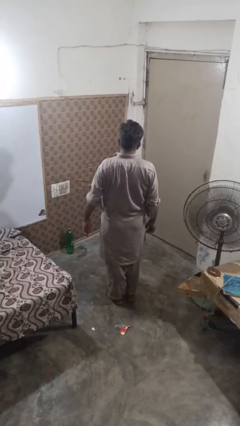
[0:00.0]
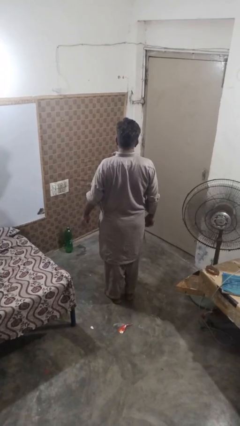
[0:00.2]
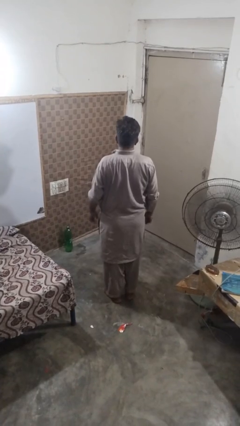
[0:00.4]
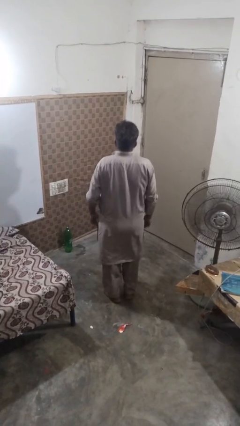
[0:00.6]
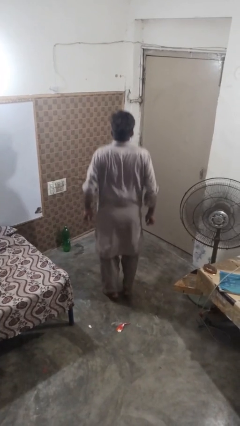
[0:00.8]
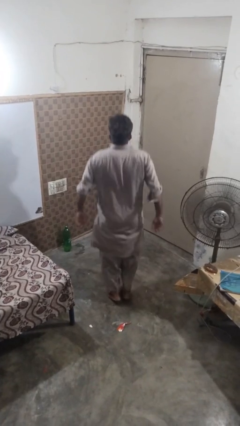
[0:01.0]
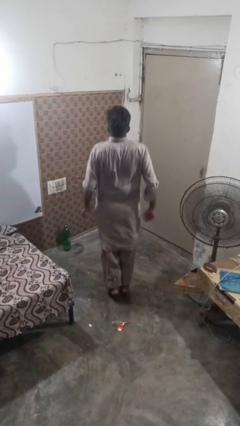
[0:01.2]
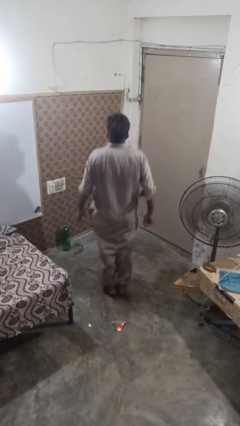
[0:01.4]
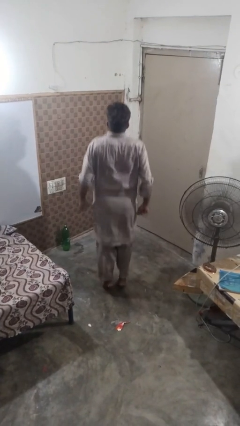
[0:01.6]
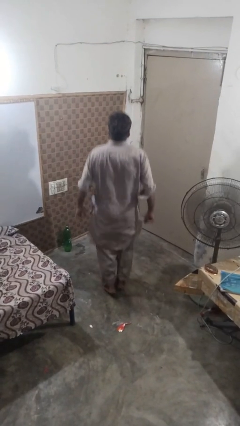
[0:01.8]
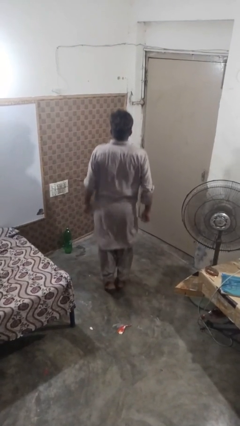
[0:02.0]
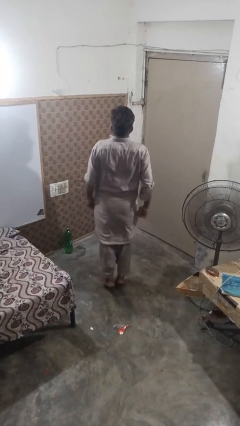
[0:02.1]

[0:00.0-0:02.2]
person jumps

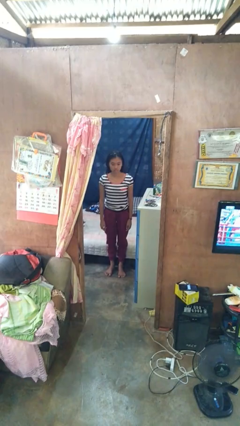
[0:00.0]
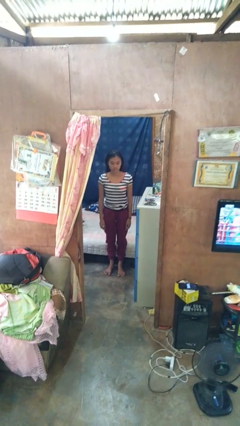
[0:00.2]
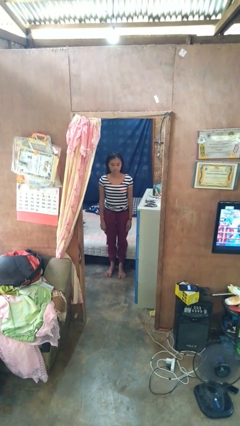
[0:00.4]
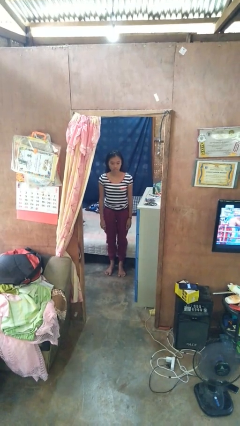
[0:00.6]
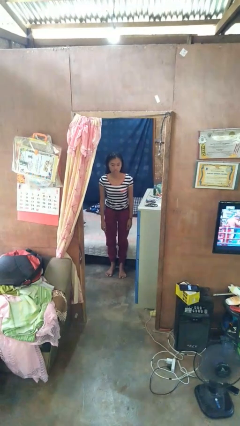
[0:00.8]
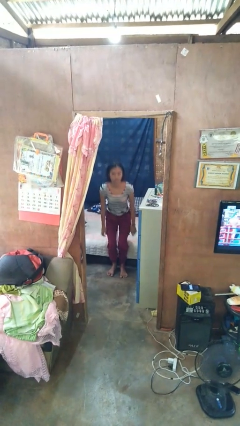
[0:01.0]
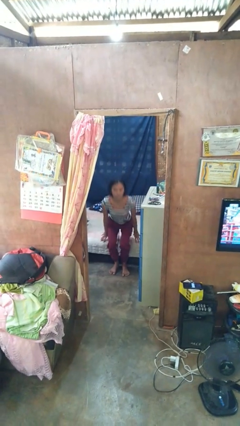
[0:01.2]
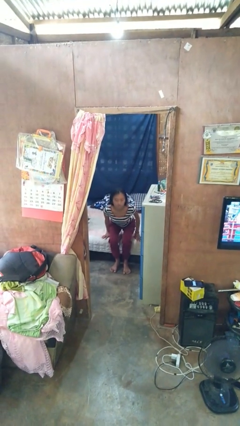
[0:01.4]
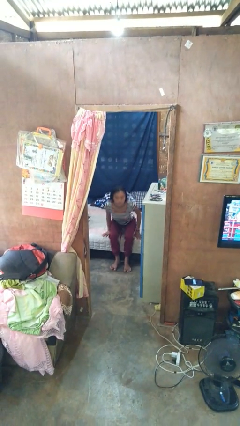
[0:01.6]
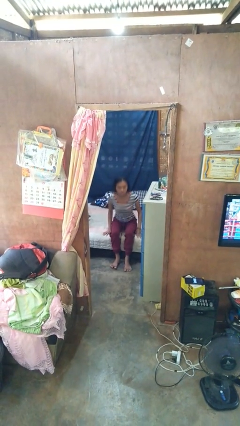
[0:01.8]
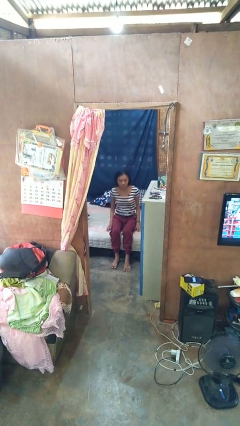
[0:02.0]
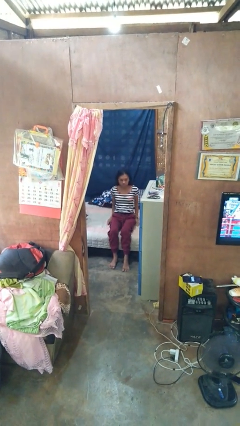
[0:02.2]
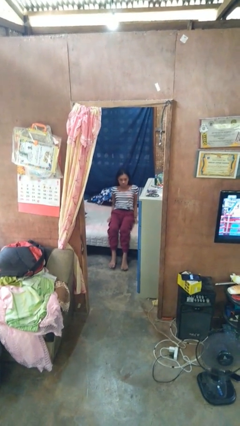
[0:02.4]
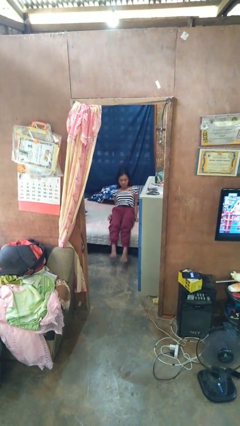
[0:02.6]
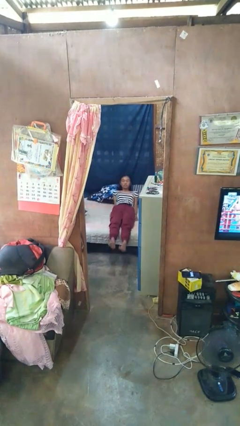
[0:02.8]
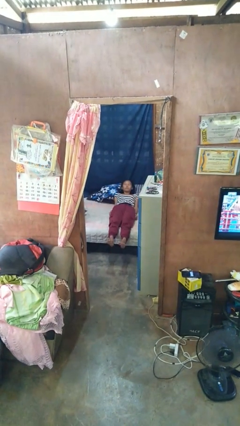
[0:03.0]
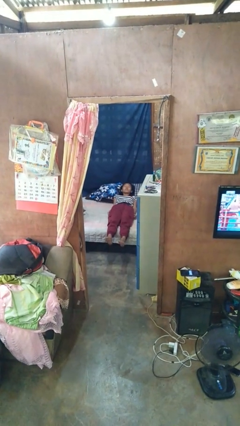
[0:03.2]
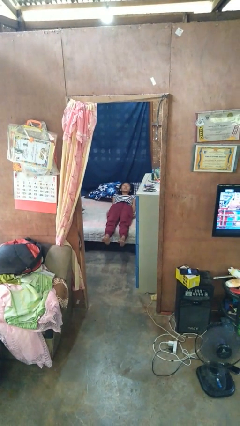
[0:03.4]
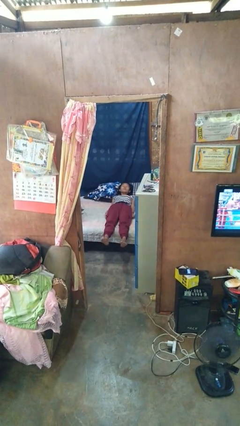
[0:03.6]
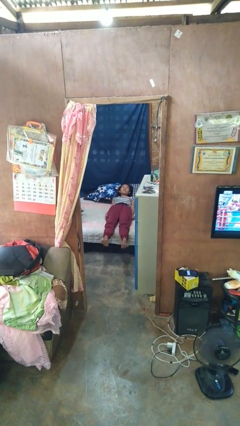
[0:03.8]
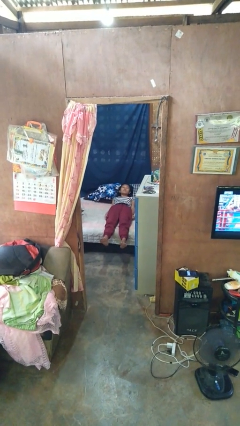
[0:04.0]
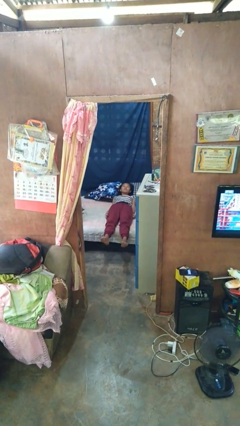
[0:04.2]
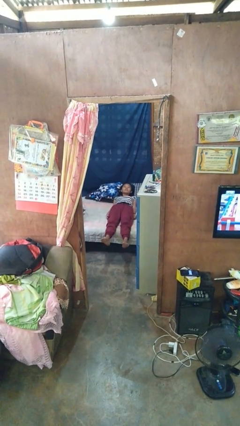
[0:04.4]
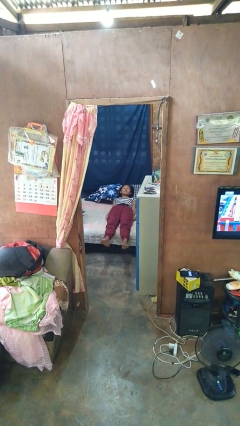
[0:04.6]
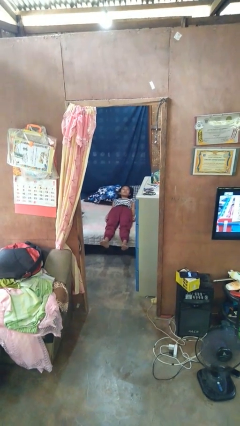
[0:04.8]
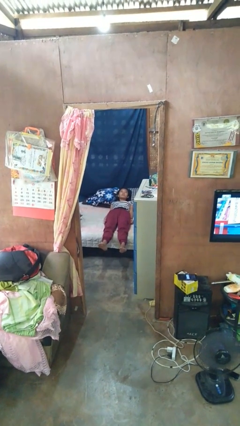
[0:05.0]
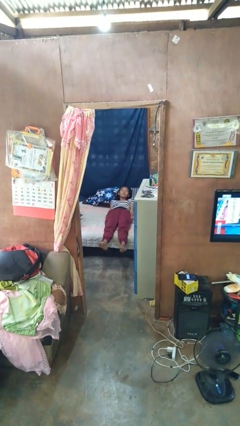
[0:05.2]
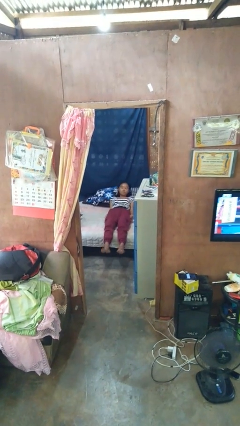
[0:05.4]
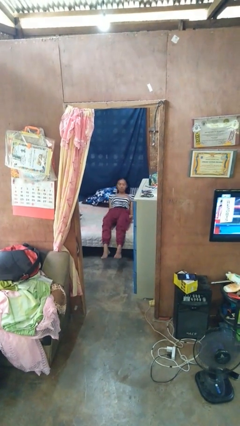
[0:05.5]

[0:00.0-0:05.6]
person lies down on bed

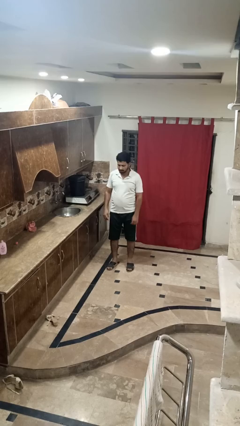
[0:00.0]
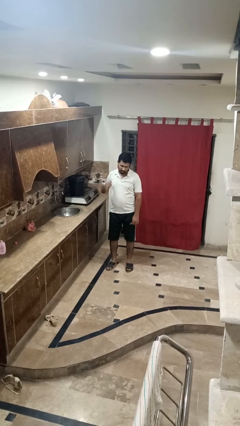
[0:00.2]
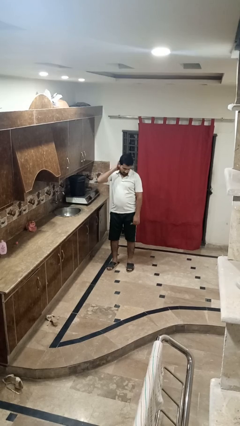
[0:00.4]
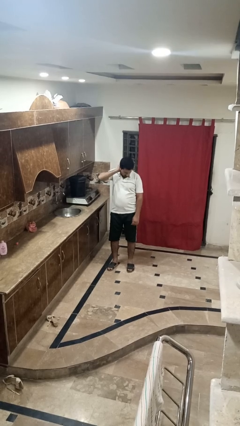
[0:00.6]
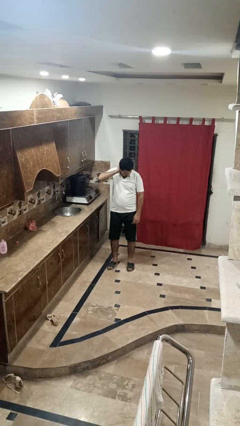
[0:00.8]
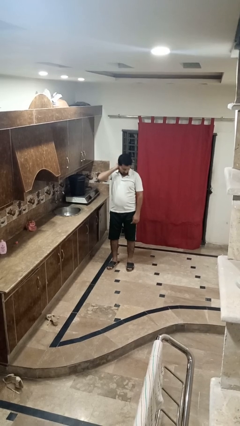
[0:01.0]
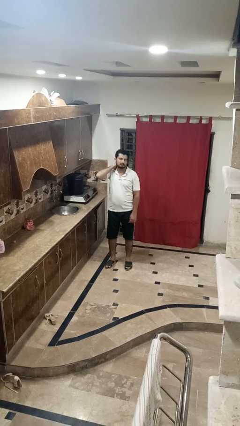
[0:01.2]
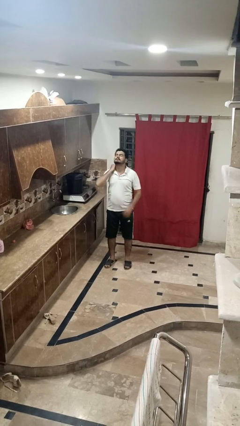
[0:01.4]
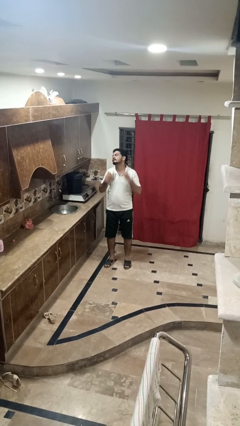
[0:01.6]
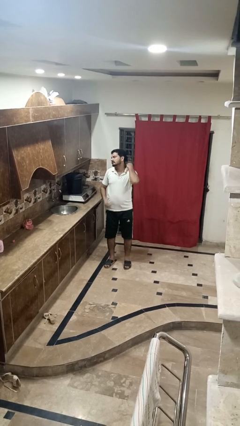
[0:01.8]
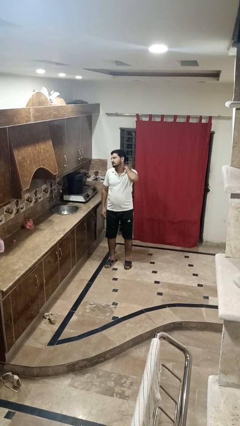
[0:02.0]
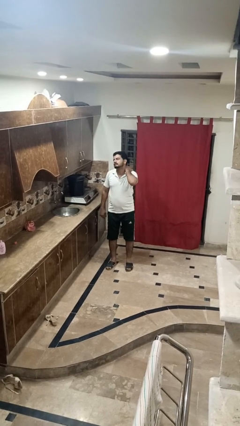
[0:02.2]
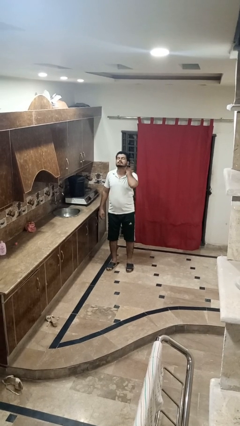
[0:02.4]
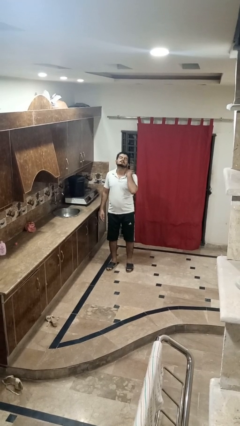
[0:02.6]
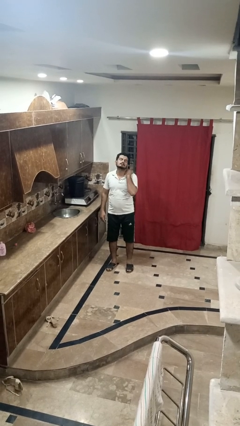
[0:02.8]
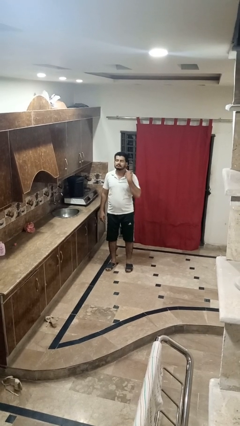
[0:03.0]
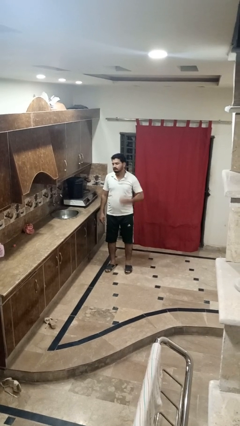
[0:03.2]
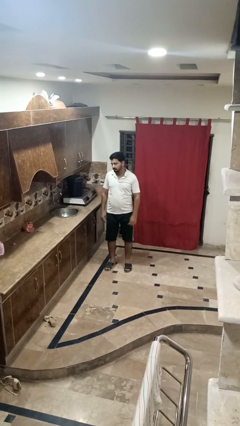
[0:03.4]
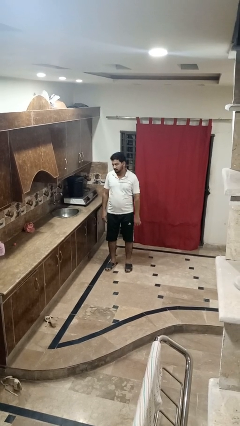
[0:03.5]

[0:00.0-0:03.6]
person rubs neck

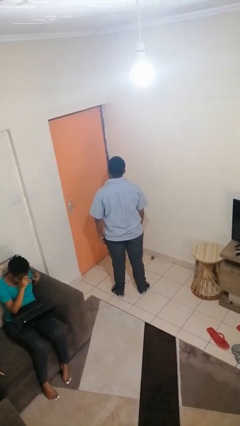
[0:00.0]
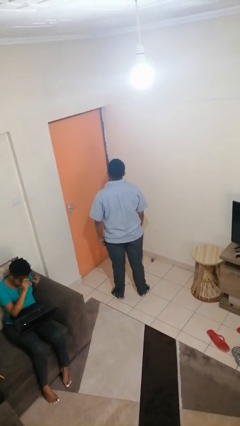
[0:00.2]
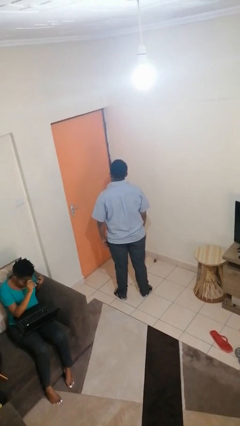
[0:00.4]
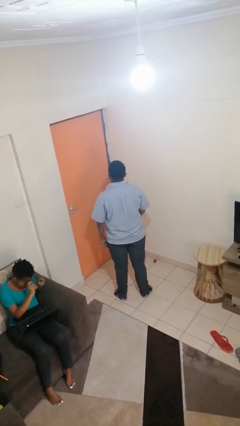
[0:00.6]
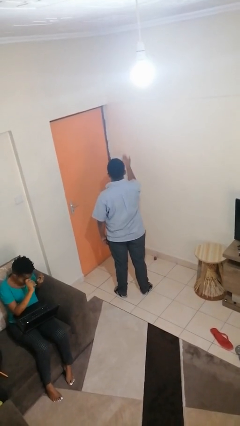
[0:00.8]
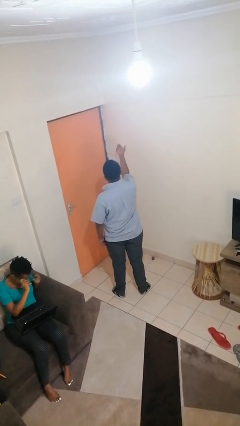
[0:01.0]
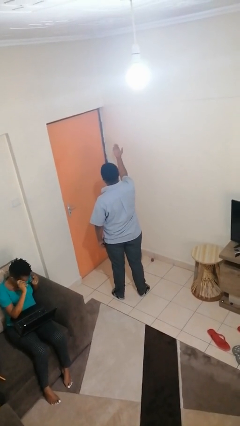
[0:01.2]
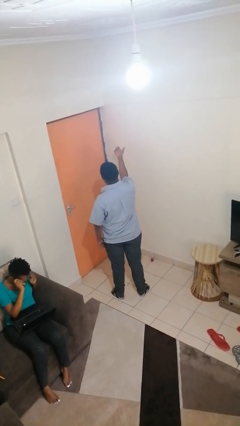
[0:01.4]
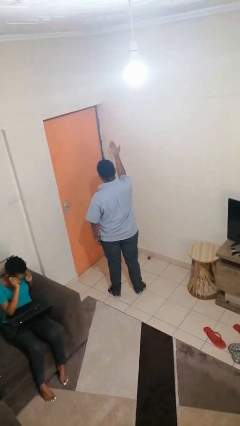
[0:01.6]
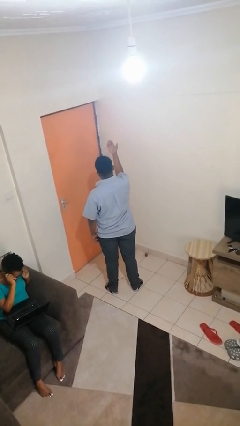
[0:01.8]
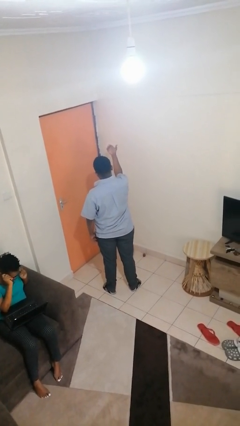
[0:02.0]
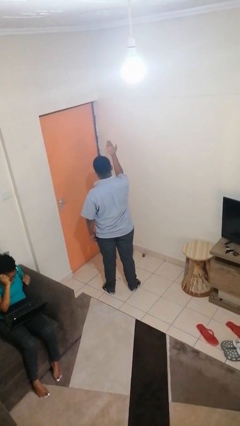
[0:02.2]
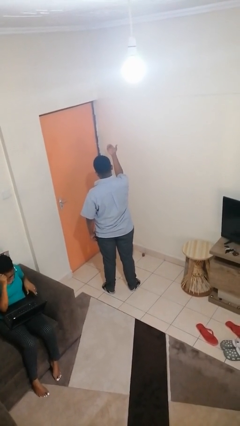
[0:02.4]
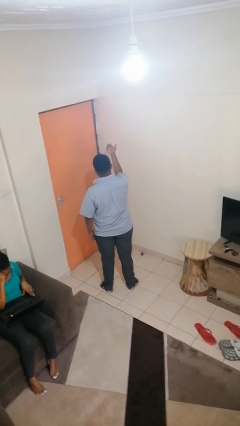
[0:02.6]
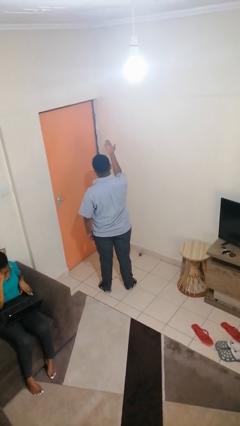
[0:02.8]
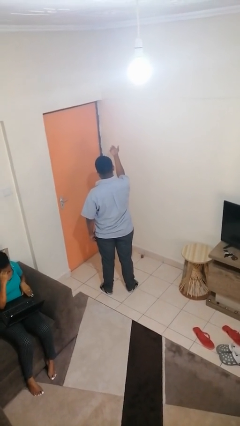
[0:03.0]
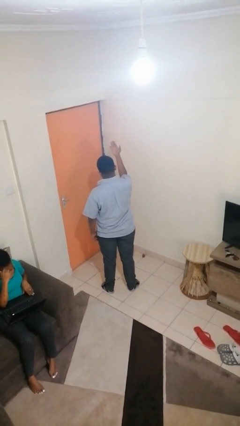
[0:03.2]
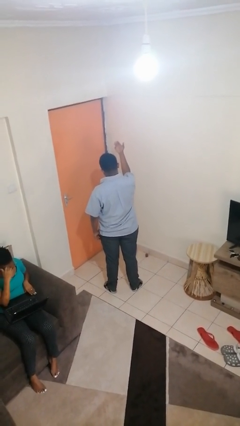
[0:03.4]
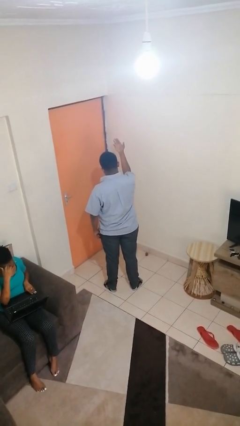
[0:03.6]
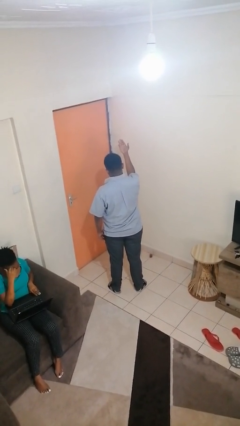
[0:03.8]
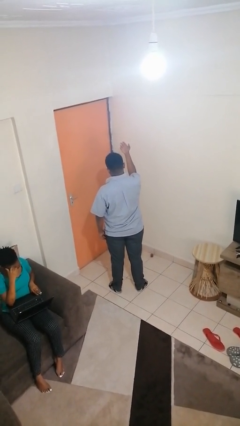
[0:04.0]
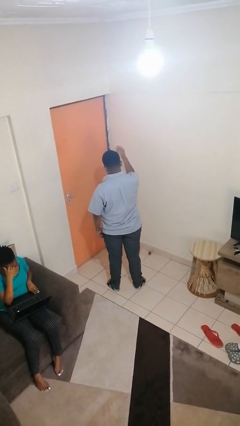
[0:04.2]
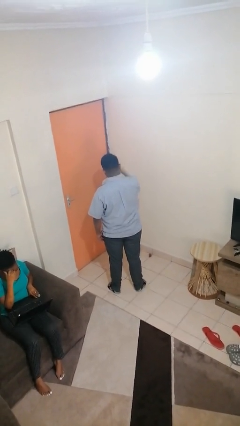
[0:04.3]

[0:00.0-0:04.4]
person gestures come here

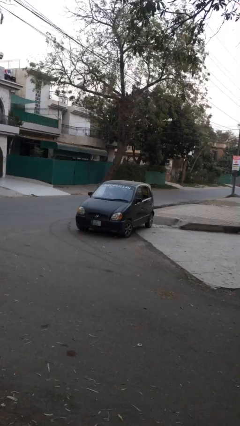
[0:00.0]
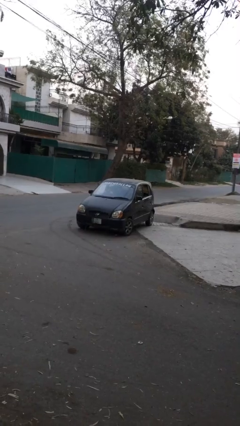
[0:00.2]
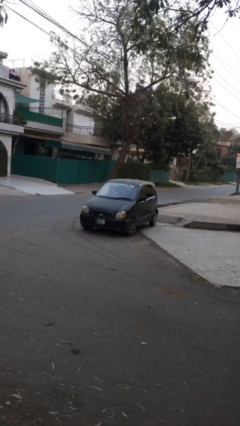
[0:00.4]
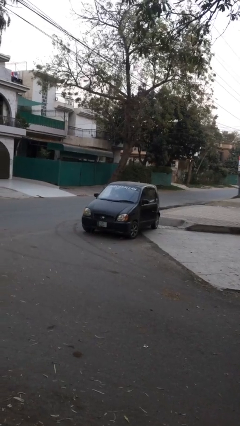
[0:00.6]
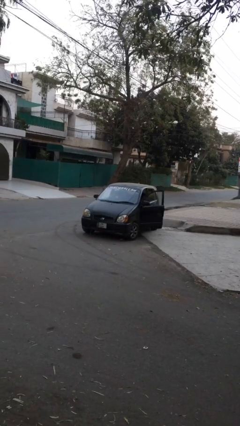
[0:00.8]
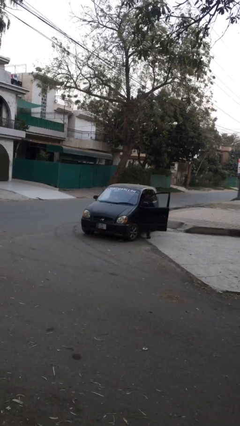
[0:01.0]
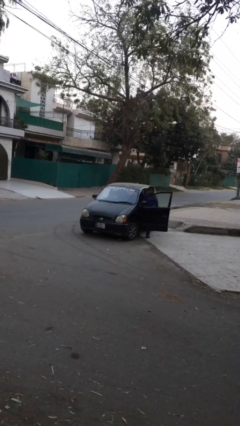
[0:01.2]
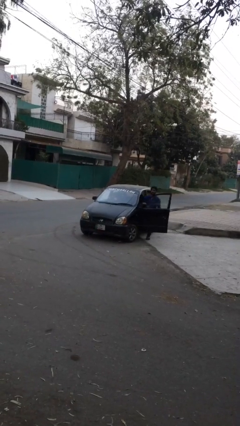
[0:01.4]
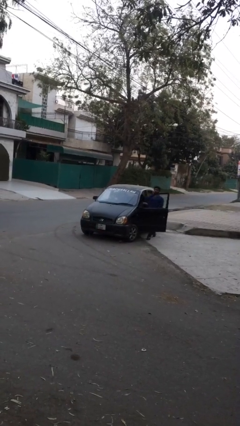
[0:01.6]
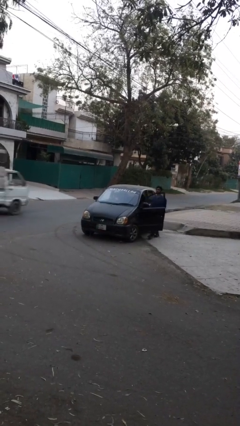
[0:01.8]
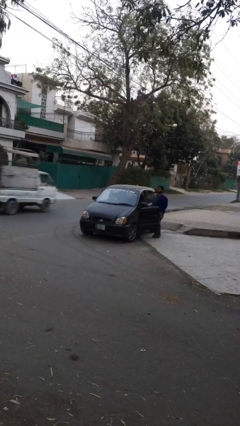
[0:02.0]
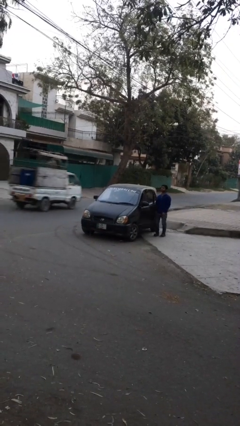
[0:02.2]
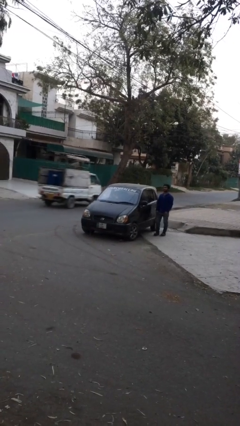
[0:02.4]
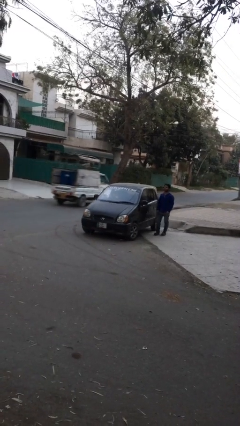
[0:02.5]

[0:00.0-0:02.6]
car drops off person
